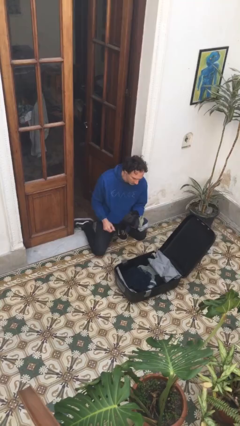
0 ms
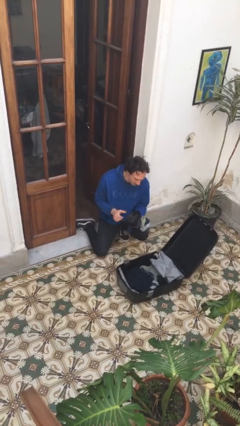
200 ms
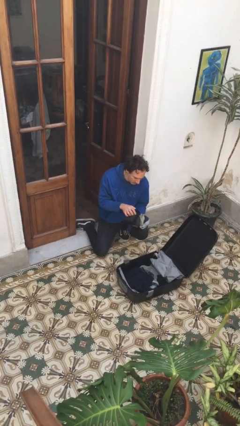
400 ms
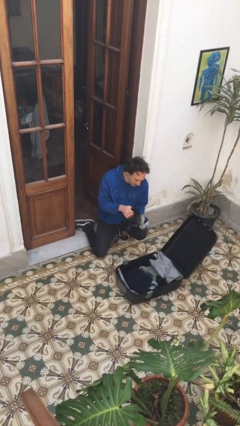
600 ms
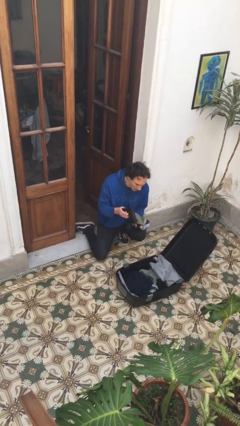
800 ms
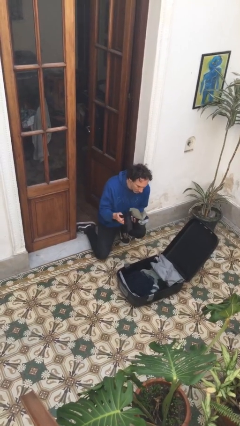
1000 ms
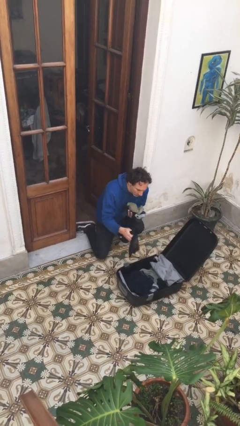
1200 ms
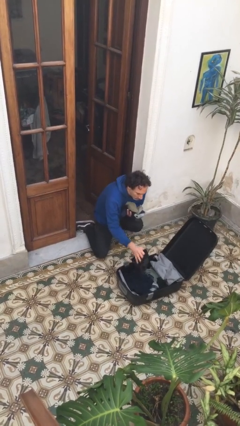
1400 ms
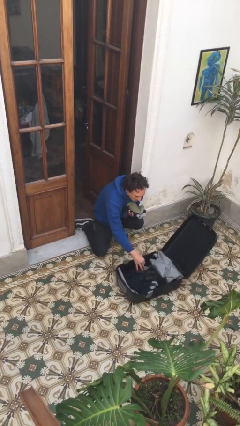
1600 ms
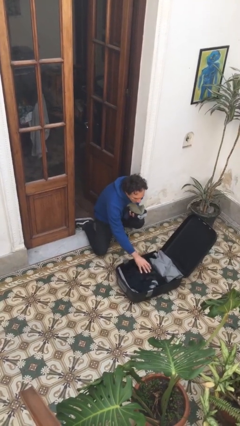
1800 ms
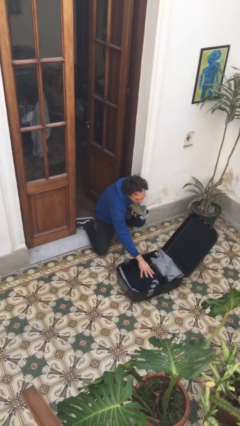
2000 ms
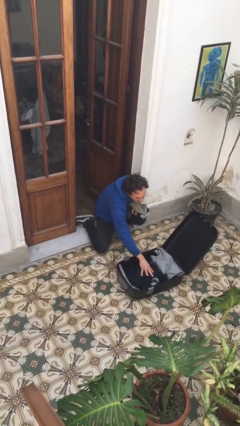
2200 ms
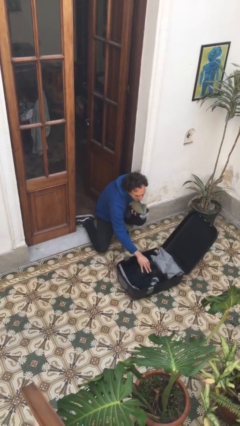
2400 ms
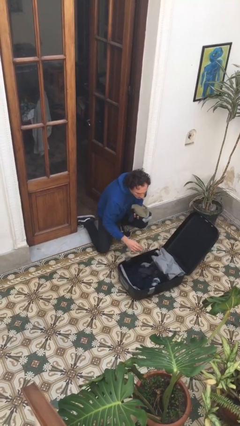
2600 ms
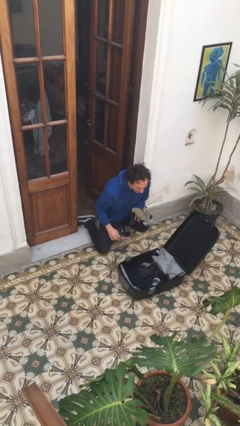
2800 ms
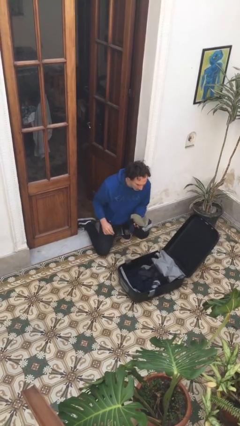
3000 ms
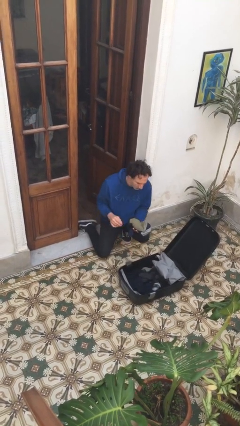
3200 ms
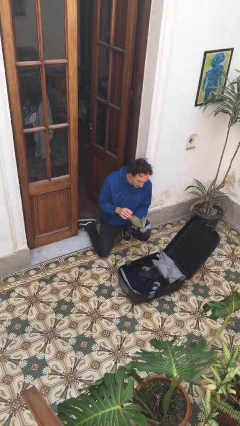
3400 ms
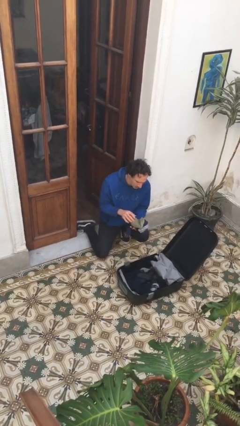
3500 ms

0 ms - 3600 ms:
person loads clothes into suitcase

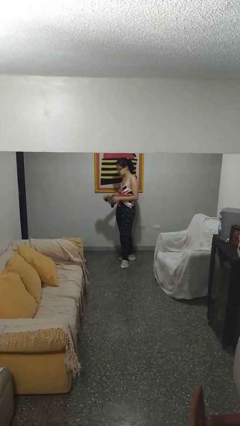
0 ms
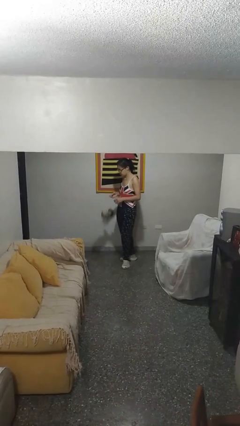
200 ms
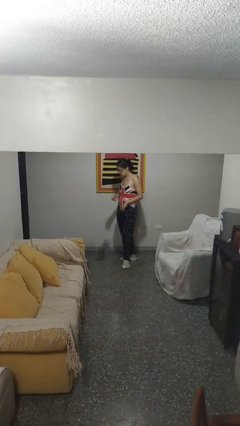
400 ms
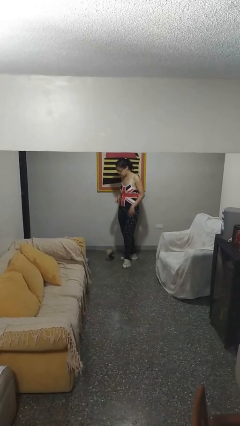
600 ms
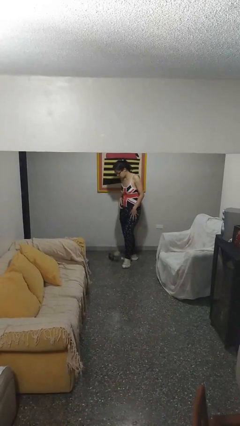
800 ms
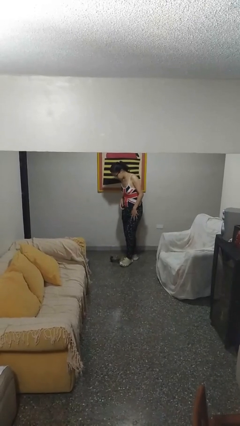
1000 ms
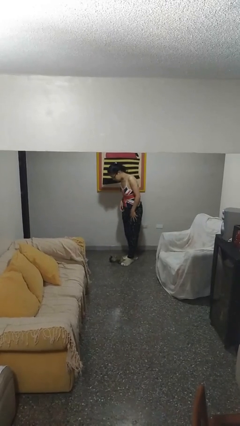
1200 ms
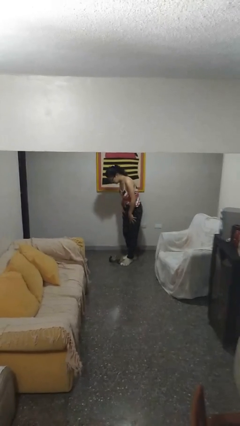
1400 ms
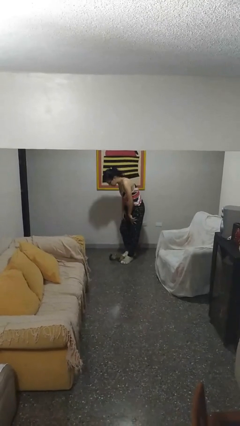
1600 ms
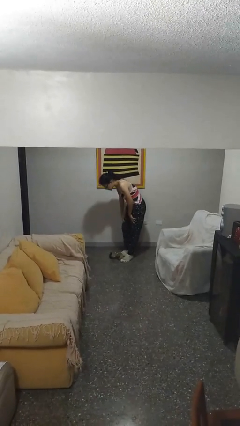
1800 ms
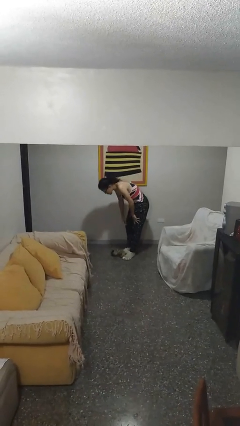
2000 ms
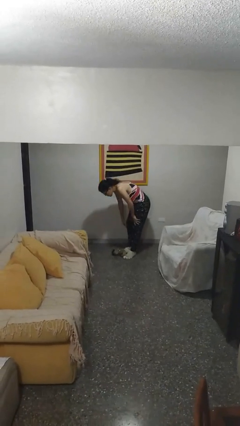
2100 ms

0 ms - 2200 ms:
person drops object

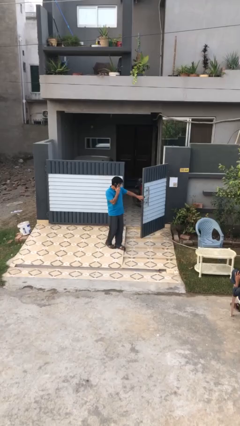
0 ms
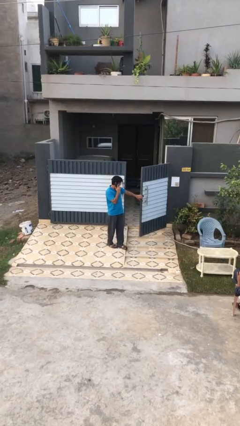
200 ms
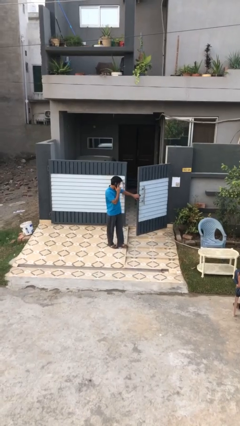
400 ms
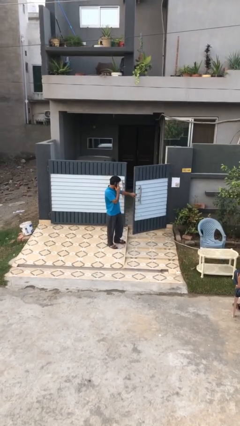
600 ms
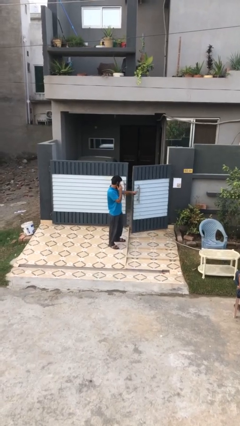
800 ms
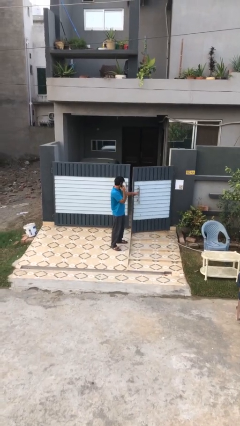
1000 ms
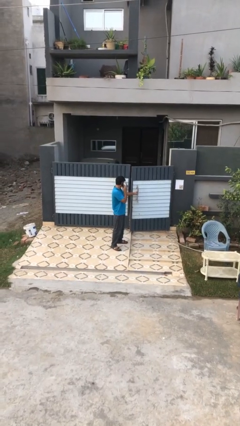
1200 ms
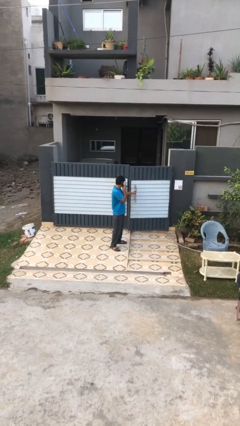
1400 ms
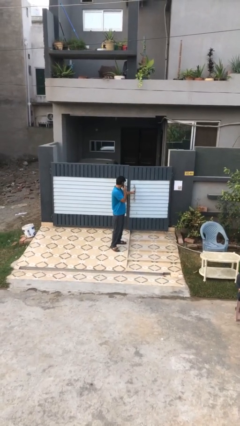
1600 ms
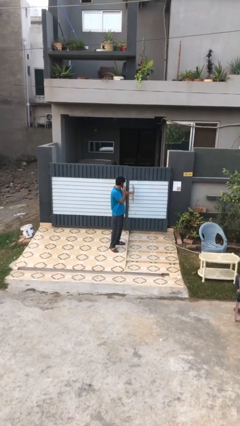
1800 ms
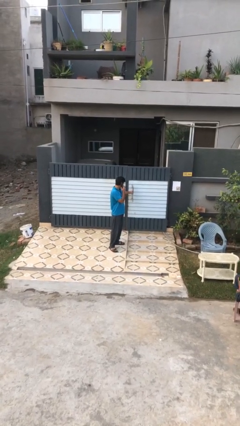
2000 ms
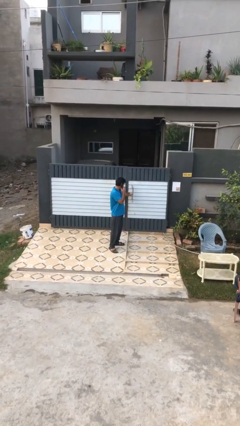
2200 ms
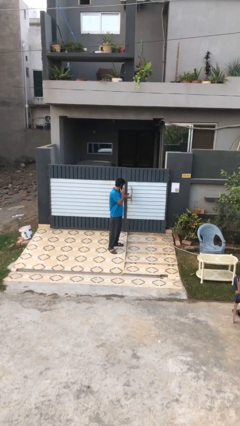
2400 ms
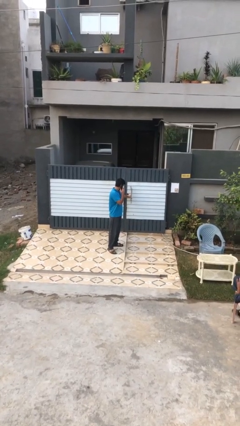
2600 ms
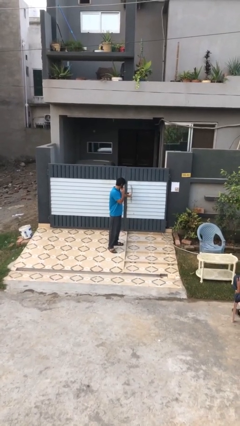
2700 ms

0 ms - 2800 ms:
person closes facility door

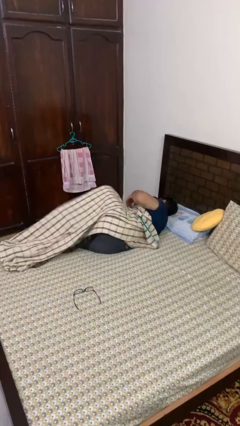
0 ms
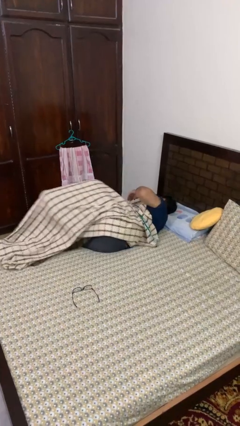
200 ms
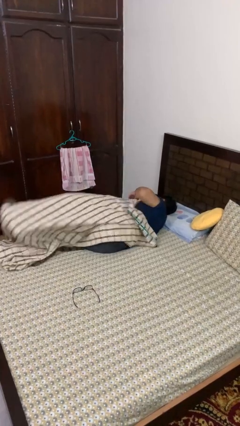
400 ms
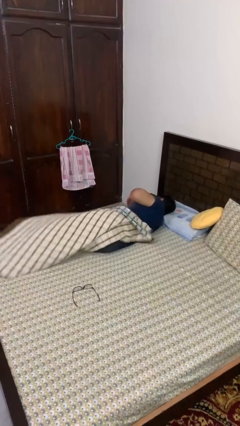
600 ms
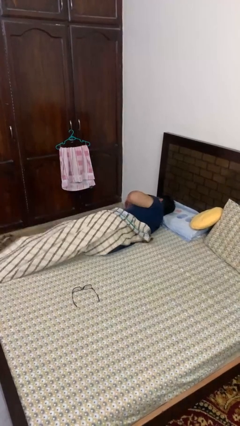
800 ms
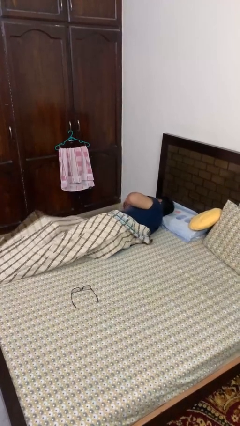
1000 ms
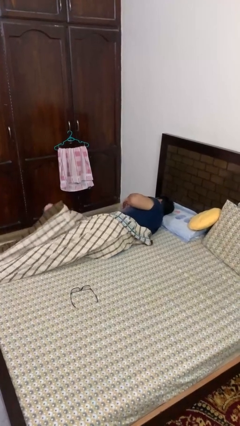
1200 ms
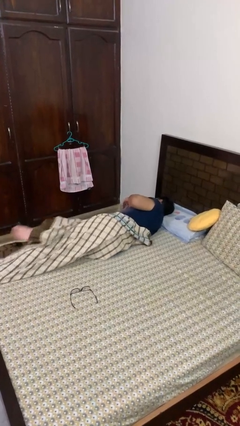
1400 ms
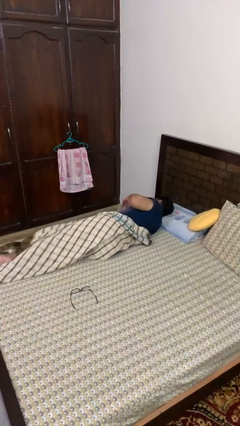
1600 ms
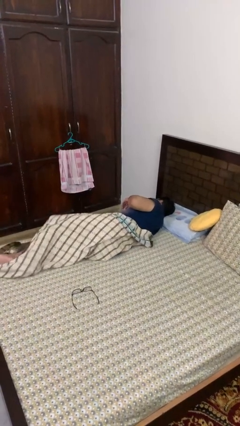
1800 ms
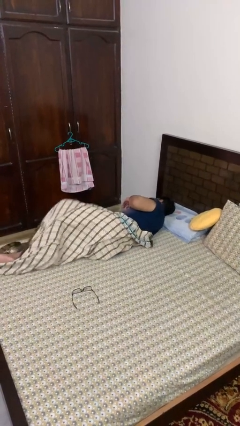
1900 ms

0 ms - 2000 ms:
person uncovers with bedsheets

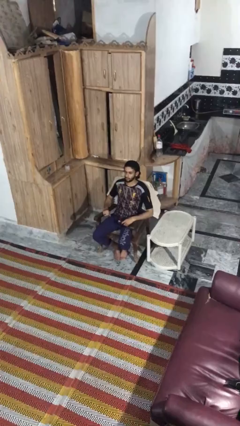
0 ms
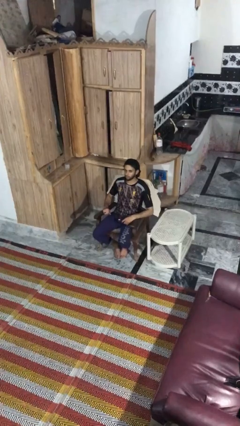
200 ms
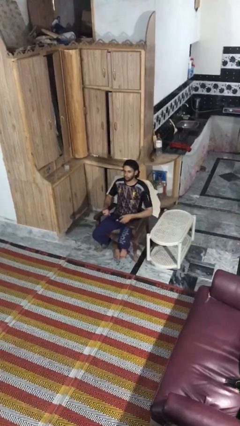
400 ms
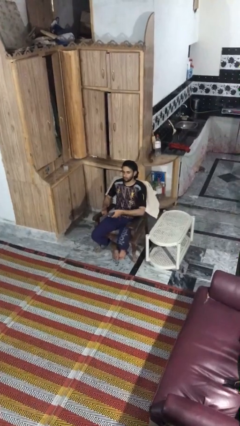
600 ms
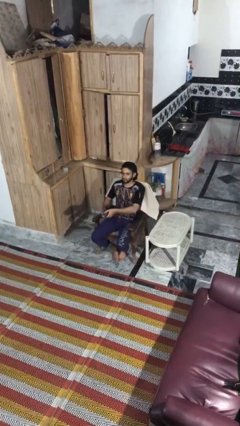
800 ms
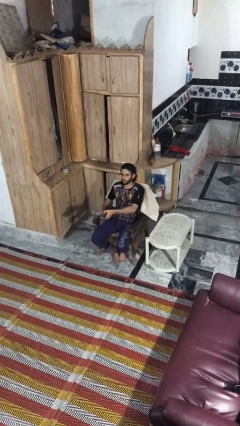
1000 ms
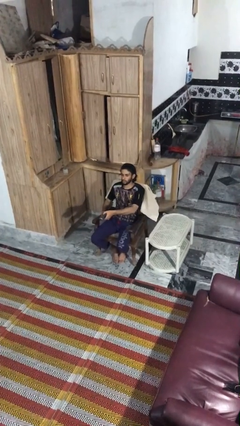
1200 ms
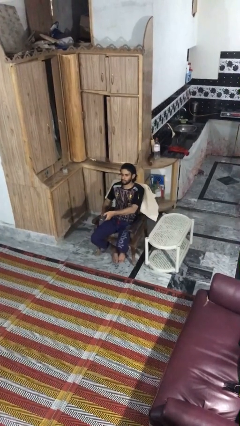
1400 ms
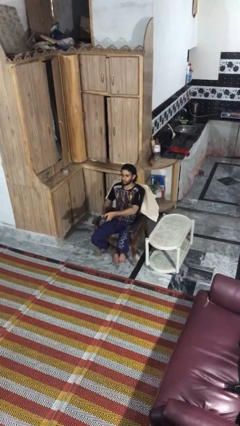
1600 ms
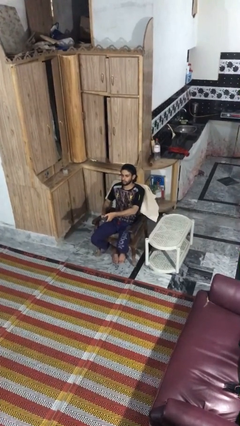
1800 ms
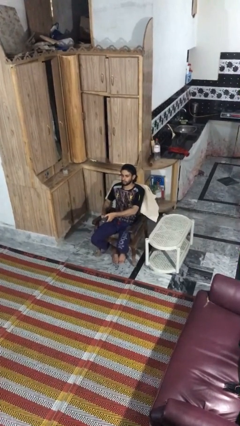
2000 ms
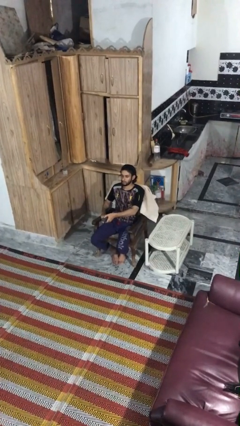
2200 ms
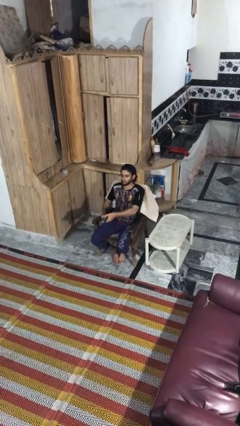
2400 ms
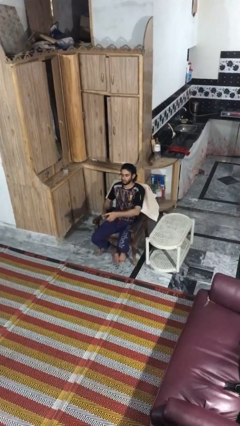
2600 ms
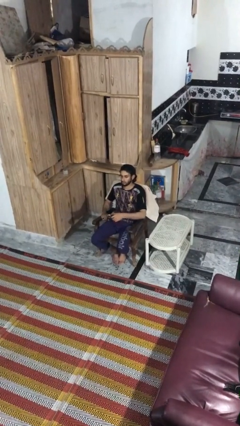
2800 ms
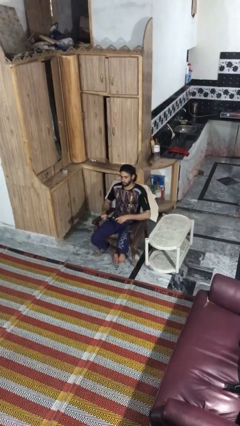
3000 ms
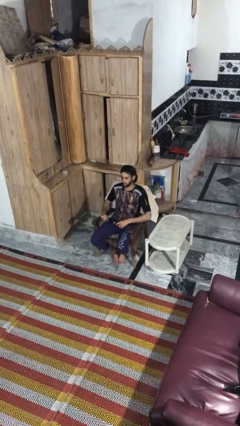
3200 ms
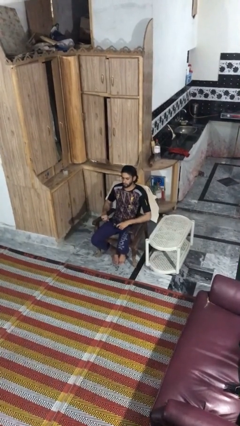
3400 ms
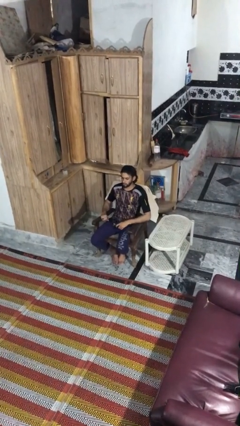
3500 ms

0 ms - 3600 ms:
person uses television remote

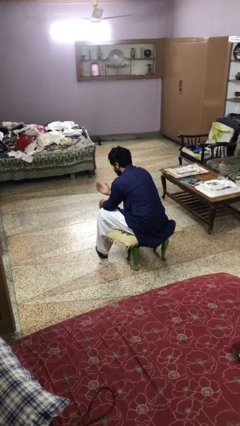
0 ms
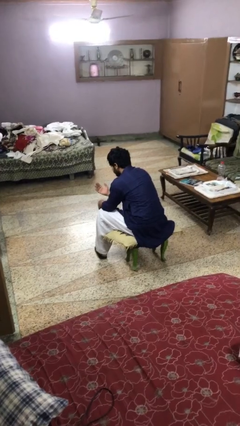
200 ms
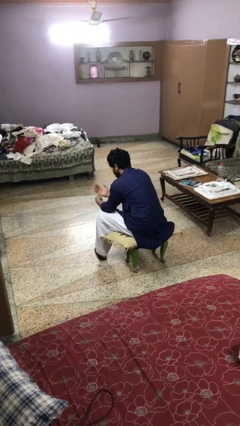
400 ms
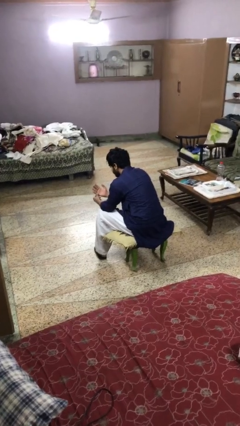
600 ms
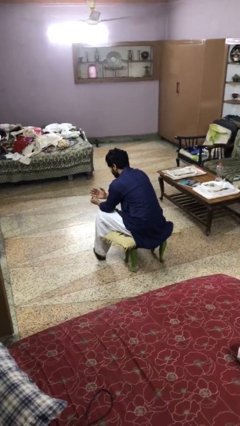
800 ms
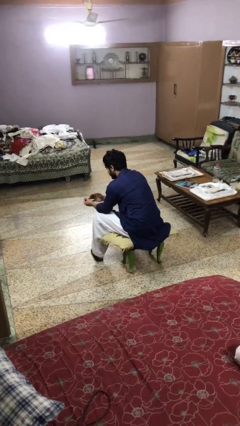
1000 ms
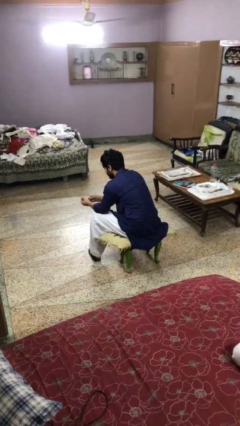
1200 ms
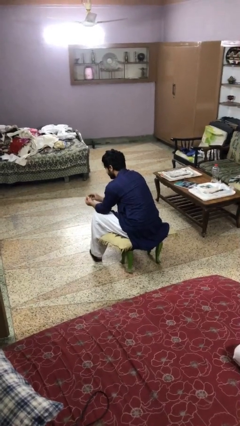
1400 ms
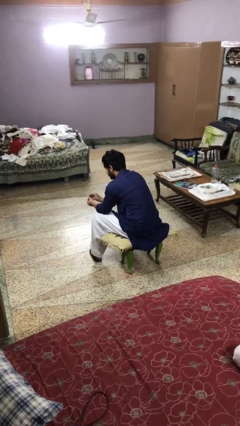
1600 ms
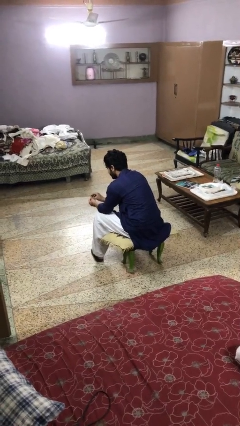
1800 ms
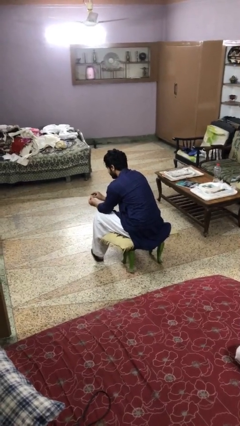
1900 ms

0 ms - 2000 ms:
person takes off ring

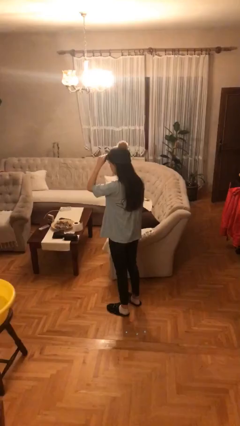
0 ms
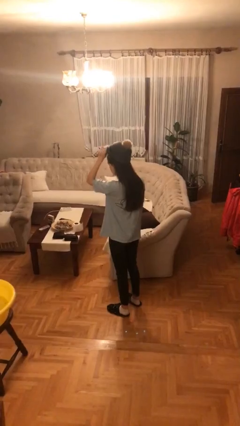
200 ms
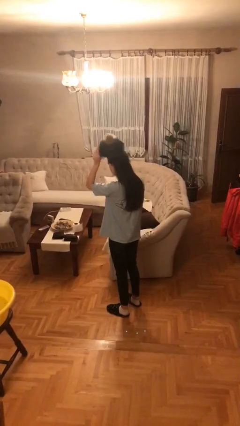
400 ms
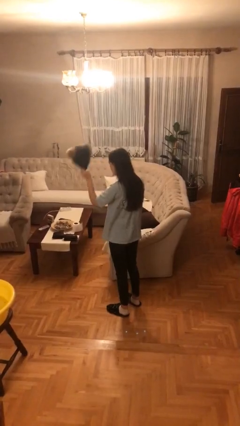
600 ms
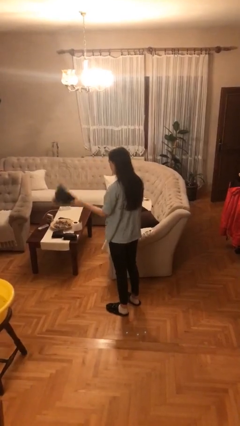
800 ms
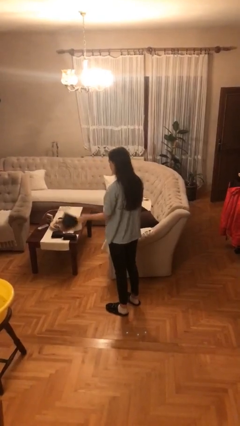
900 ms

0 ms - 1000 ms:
person takes off hat
